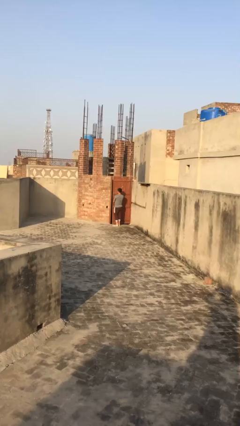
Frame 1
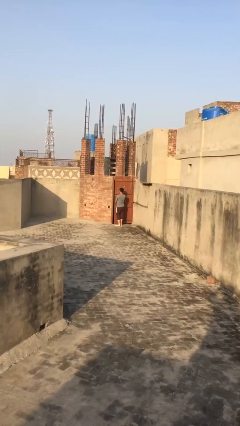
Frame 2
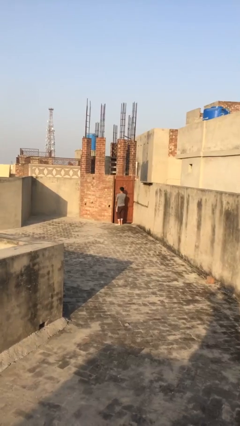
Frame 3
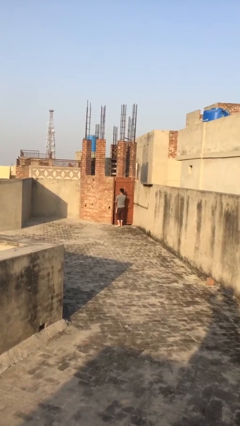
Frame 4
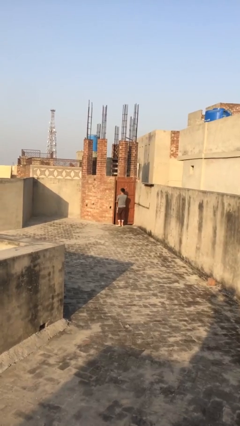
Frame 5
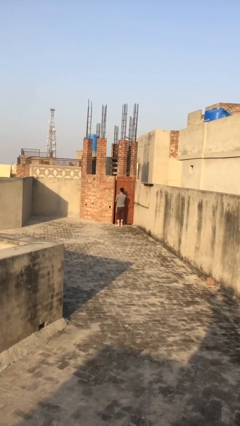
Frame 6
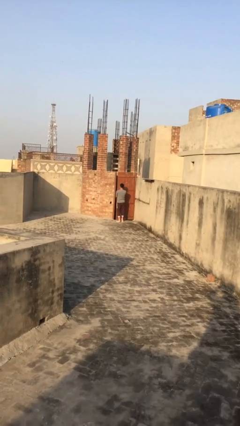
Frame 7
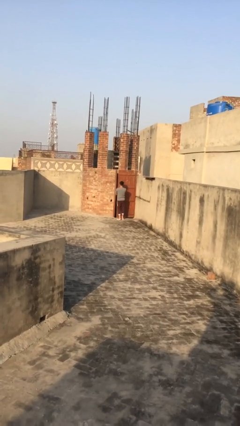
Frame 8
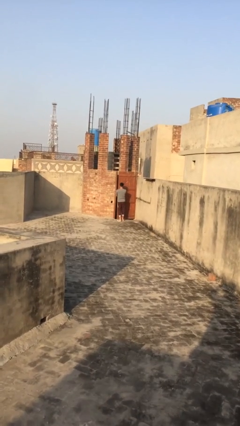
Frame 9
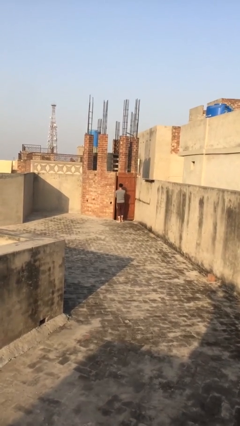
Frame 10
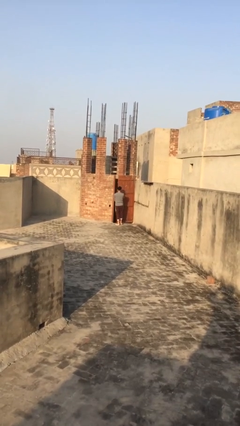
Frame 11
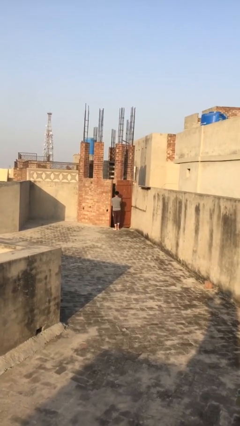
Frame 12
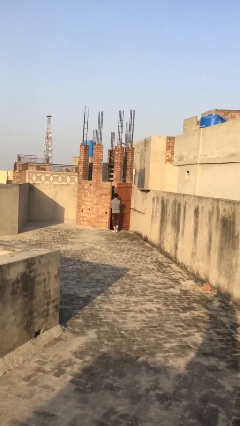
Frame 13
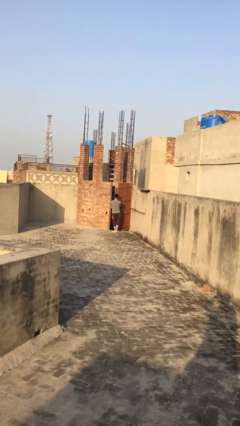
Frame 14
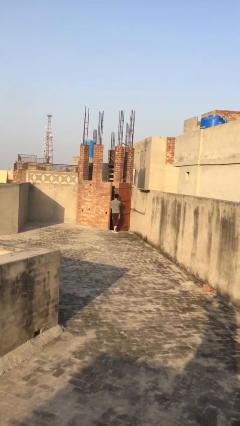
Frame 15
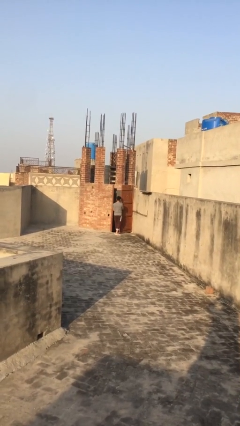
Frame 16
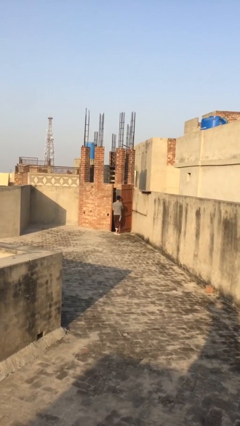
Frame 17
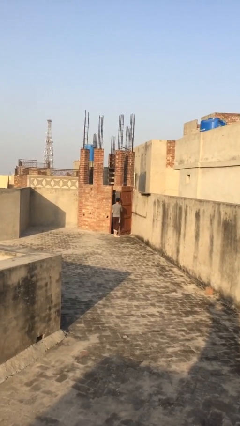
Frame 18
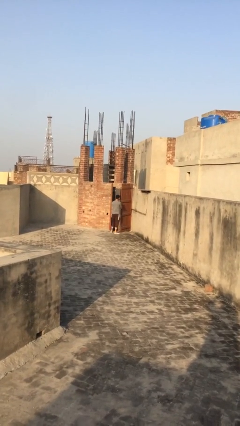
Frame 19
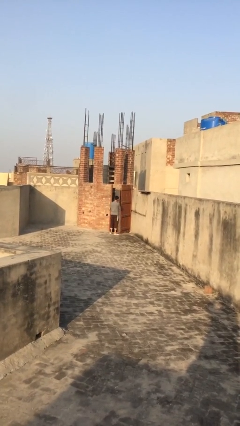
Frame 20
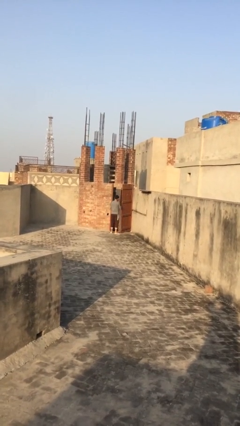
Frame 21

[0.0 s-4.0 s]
person opens facility door

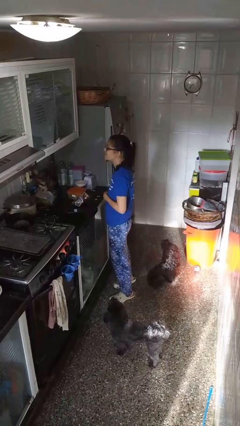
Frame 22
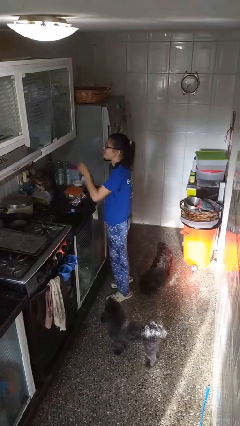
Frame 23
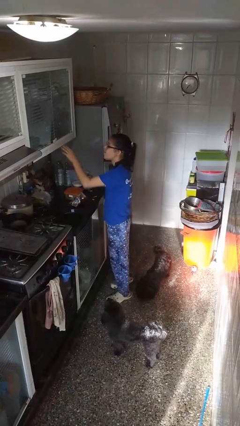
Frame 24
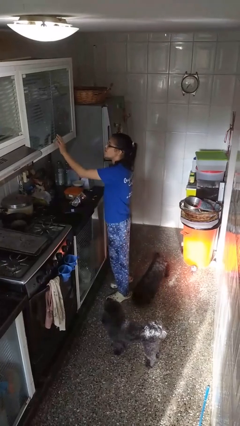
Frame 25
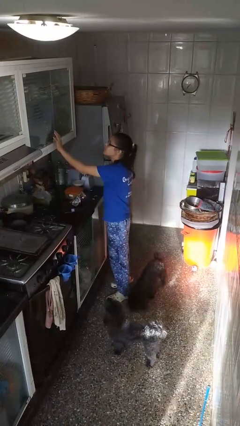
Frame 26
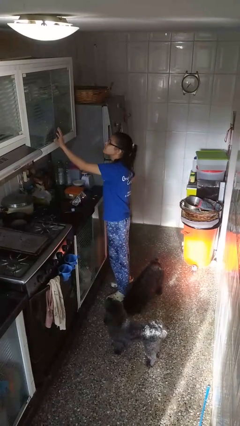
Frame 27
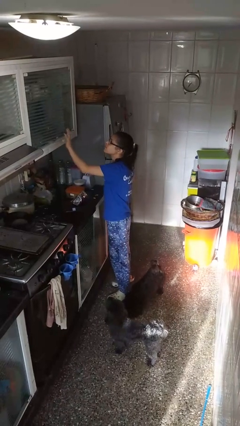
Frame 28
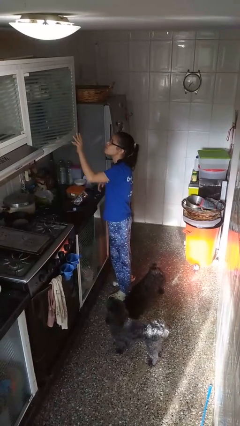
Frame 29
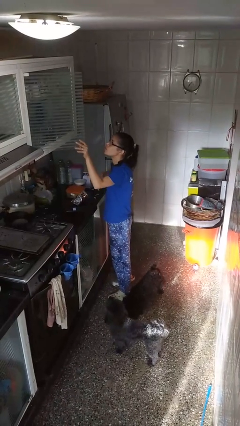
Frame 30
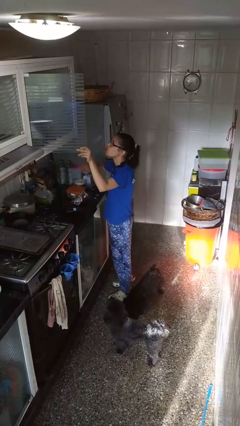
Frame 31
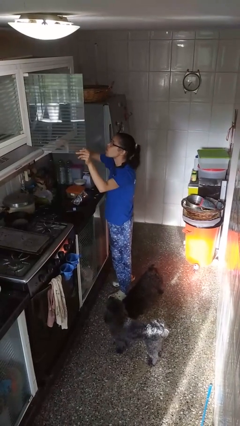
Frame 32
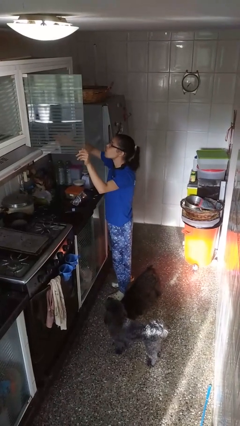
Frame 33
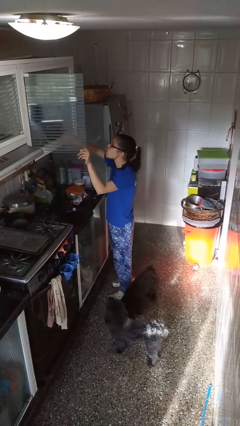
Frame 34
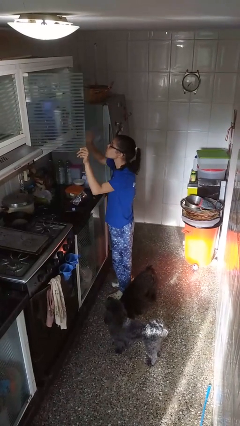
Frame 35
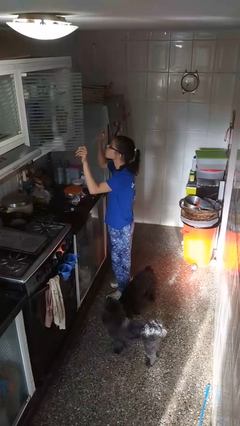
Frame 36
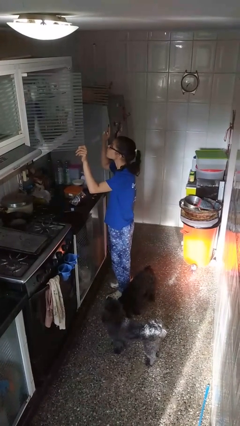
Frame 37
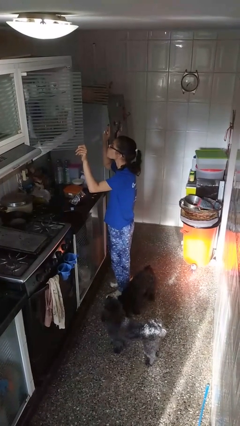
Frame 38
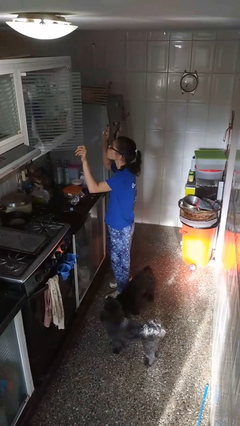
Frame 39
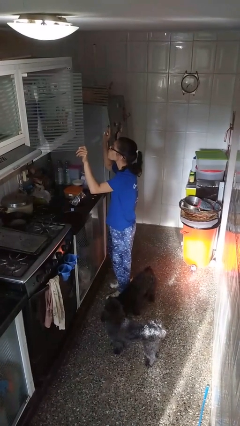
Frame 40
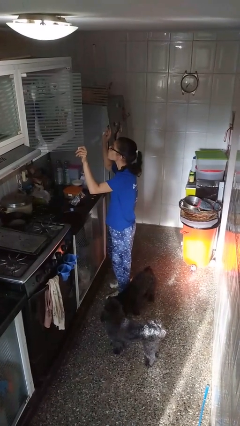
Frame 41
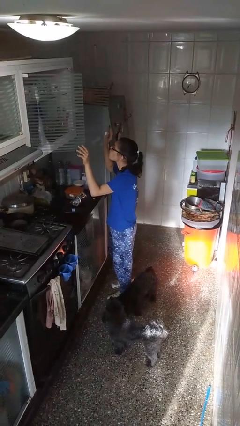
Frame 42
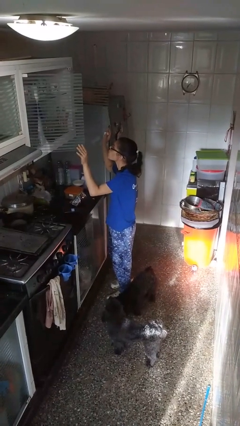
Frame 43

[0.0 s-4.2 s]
person closes cabinet

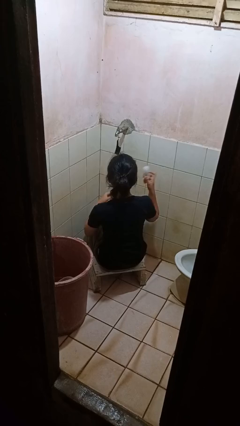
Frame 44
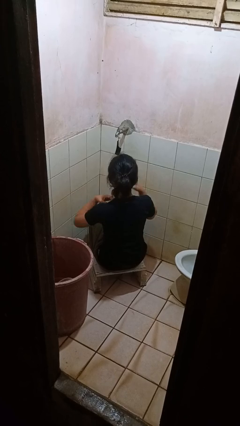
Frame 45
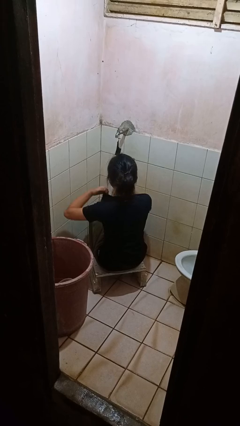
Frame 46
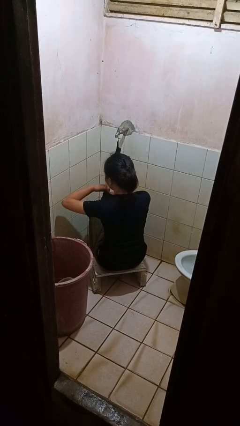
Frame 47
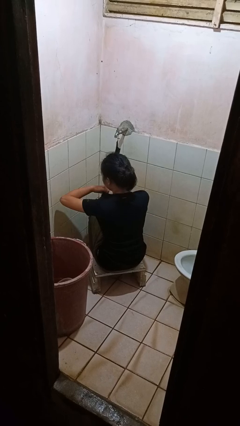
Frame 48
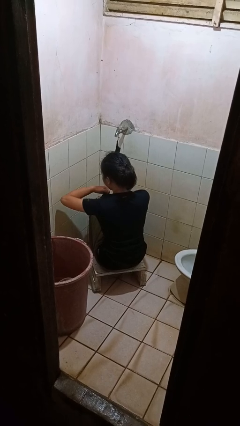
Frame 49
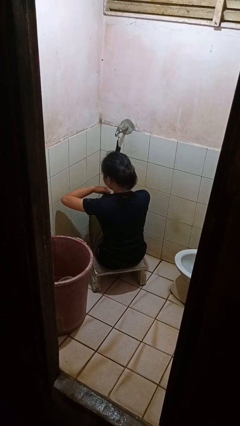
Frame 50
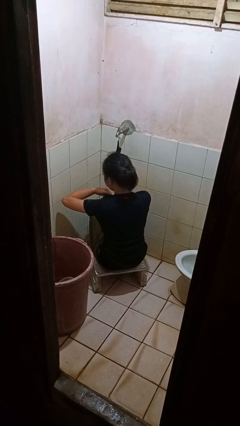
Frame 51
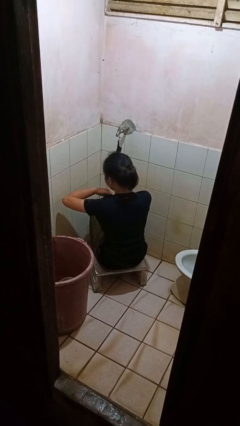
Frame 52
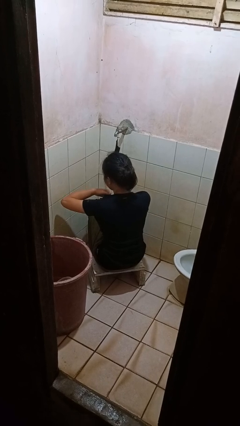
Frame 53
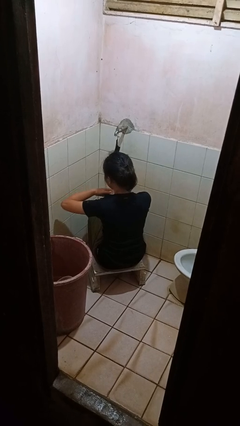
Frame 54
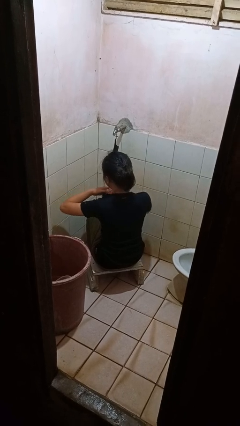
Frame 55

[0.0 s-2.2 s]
person applies deodorant

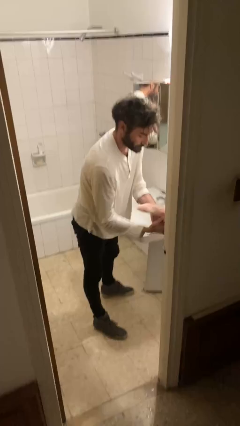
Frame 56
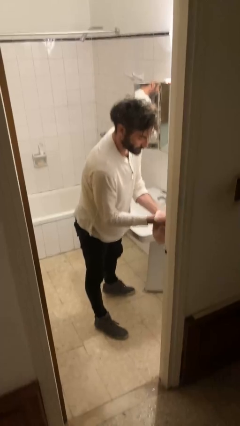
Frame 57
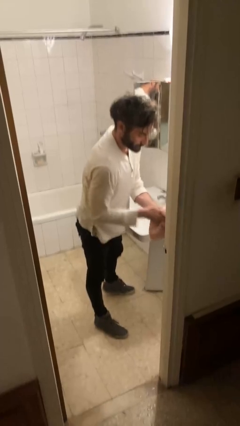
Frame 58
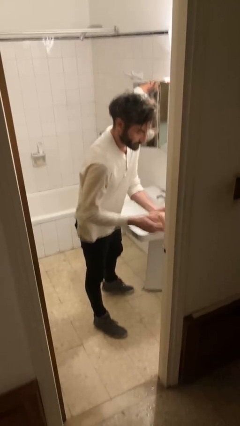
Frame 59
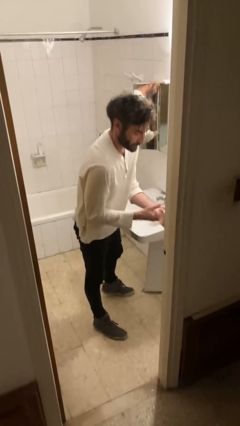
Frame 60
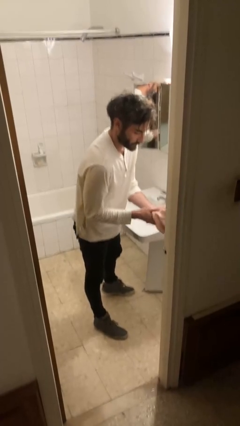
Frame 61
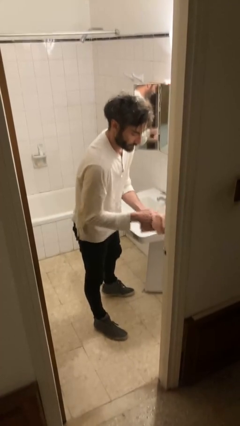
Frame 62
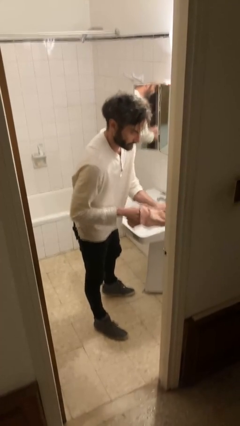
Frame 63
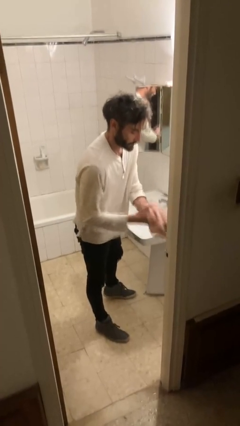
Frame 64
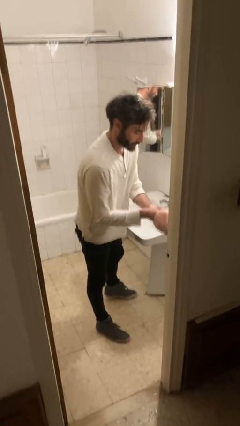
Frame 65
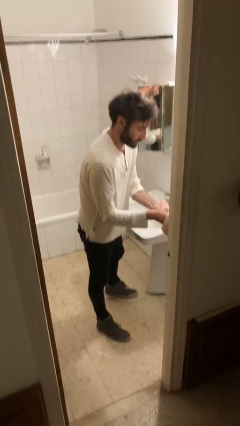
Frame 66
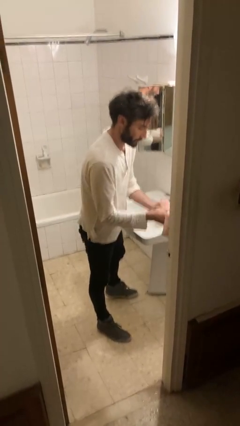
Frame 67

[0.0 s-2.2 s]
person dries hands with towel

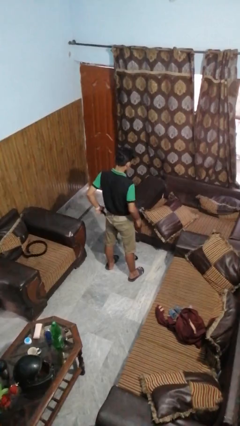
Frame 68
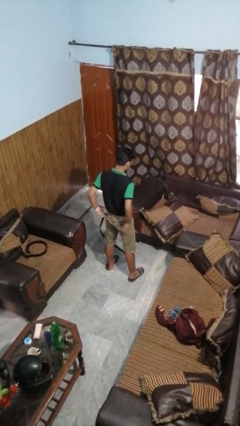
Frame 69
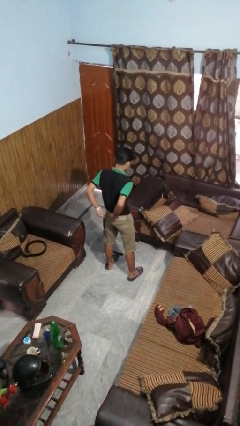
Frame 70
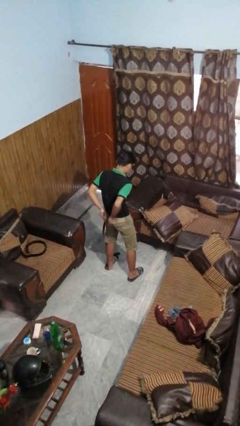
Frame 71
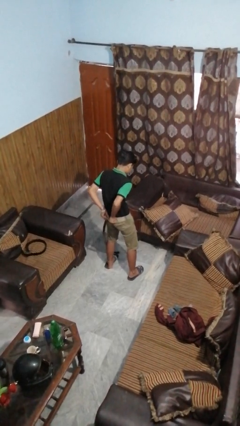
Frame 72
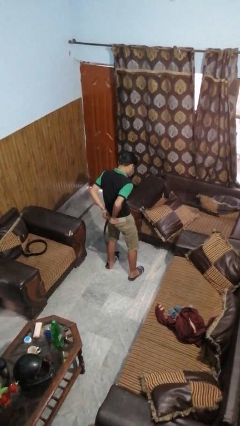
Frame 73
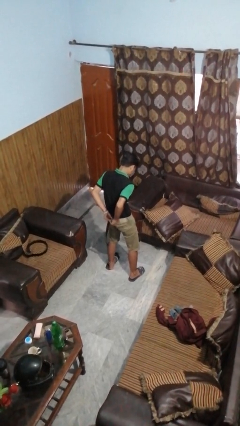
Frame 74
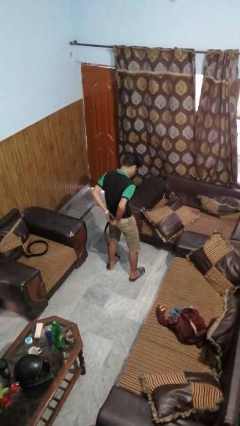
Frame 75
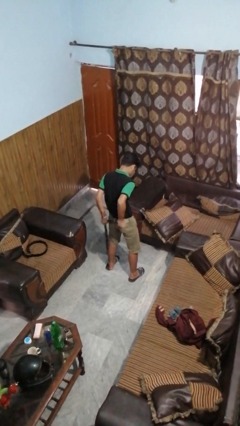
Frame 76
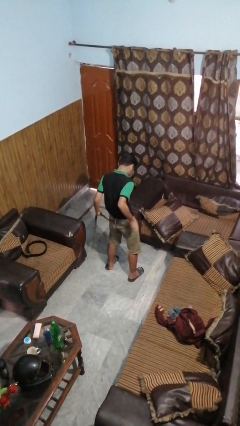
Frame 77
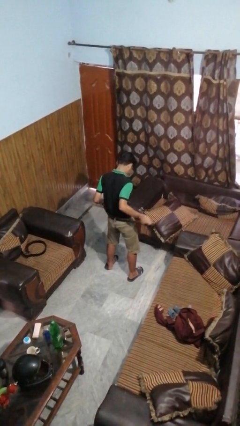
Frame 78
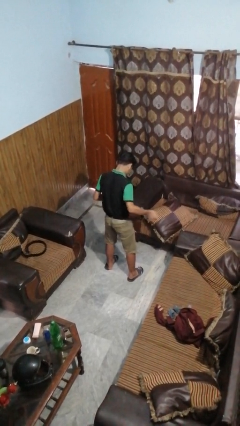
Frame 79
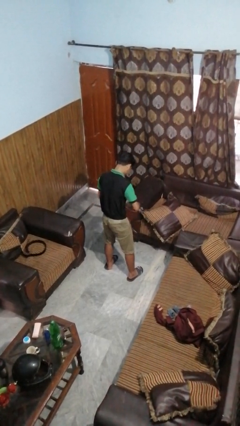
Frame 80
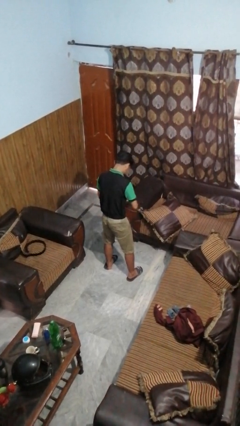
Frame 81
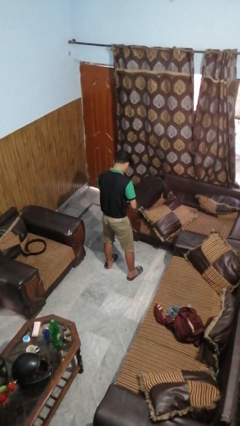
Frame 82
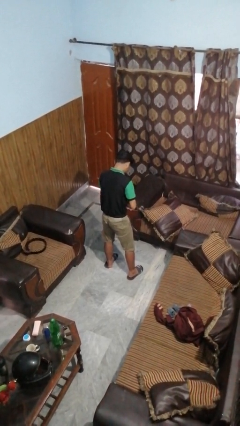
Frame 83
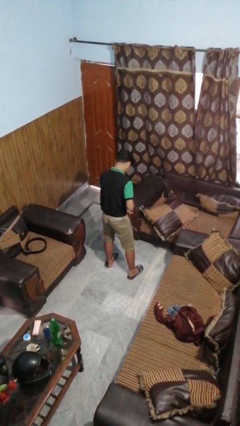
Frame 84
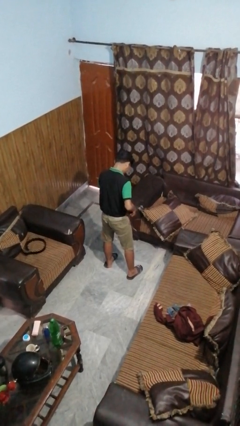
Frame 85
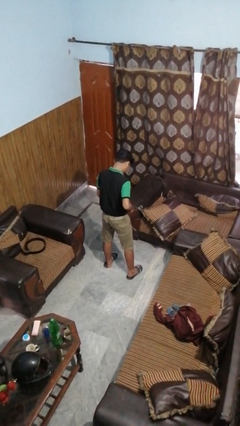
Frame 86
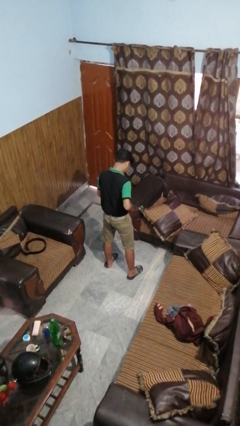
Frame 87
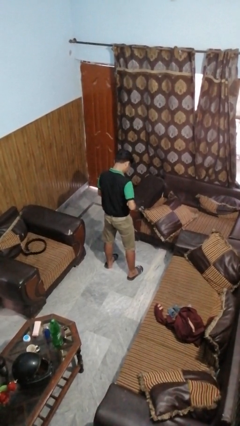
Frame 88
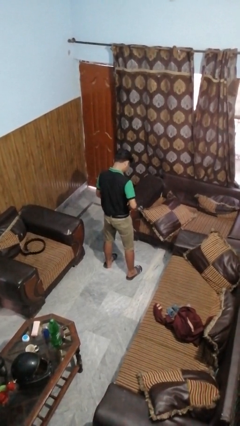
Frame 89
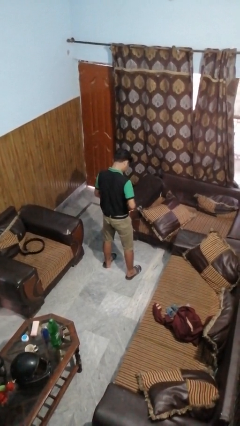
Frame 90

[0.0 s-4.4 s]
person puts on belt

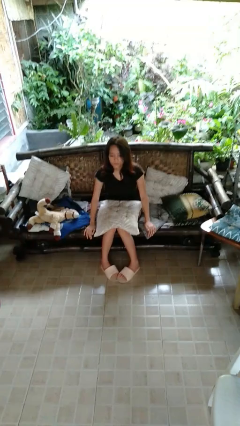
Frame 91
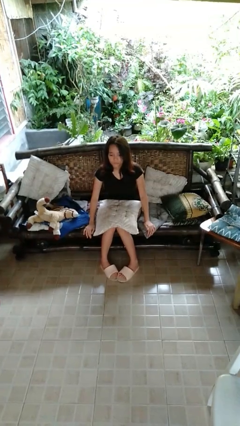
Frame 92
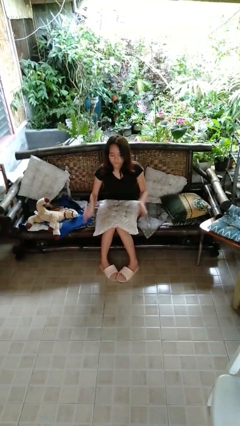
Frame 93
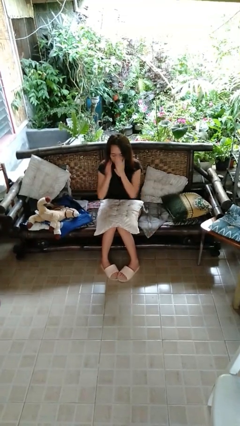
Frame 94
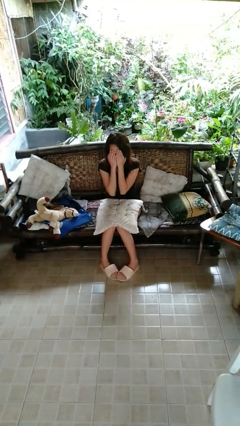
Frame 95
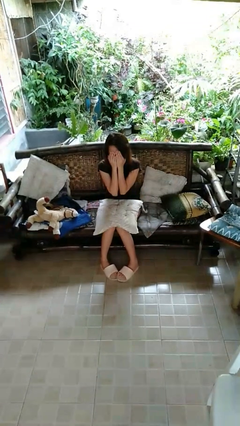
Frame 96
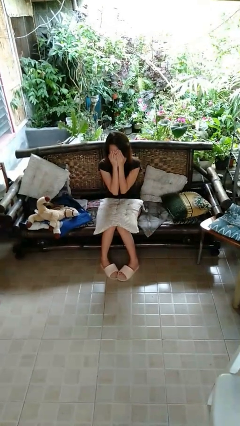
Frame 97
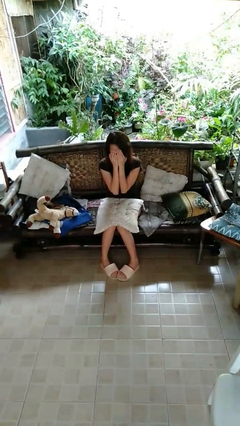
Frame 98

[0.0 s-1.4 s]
person covers face with hands
